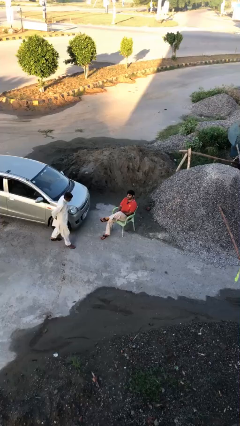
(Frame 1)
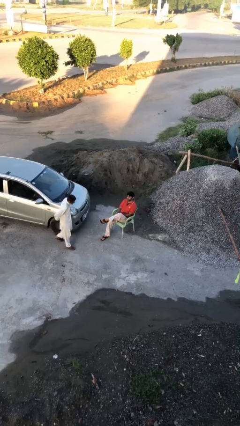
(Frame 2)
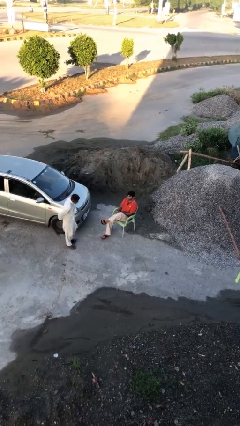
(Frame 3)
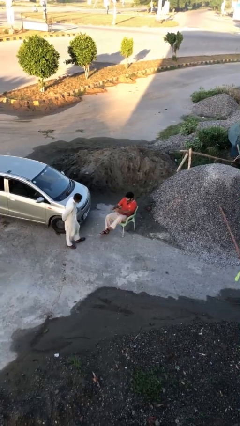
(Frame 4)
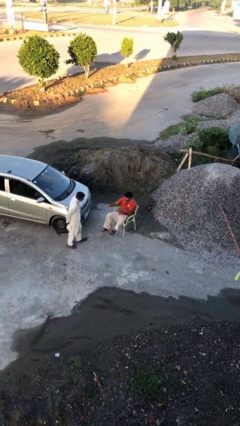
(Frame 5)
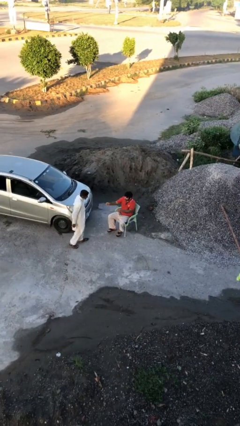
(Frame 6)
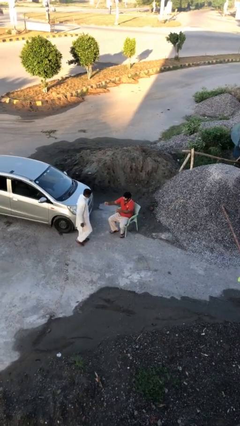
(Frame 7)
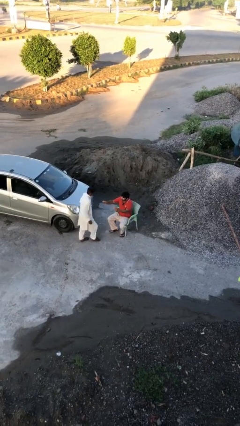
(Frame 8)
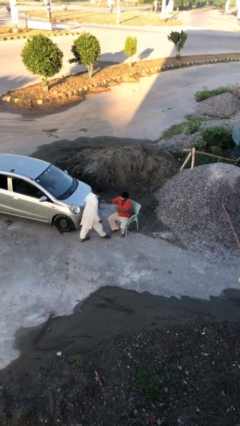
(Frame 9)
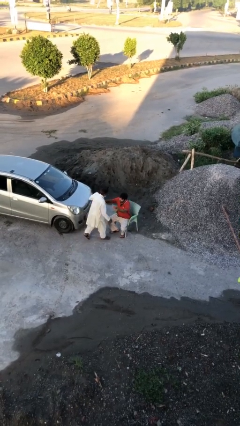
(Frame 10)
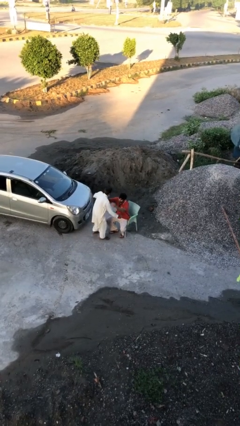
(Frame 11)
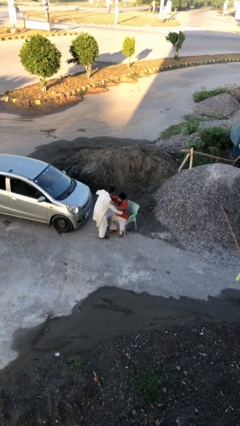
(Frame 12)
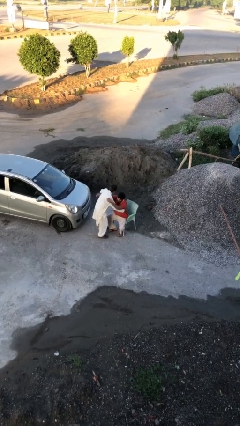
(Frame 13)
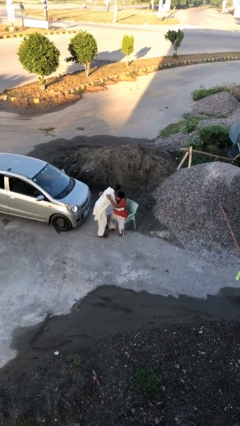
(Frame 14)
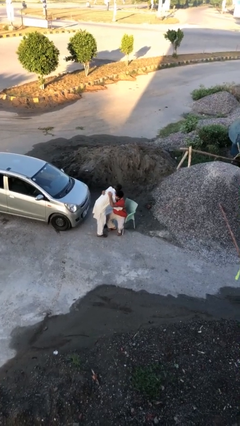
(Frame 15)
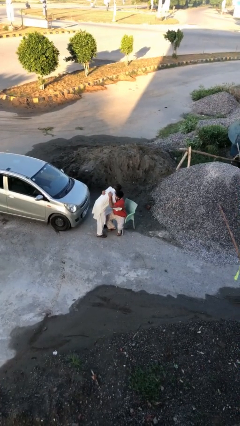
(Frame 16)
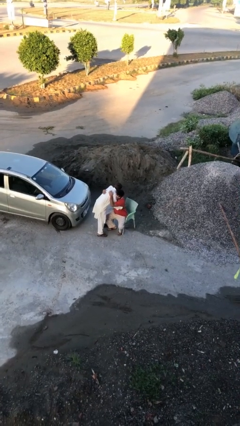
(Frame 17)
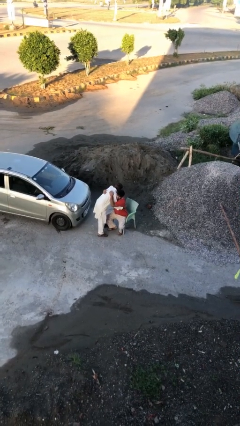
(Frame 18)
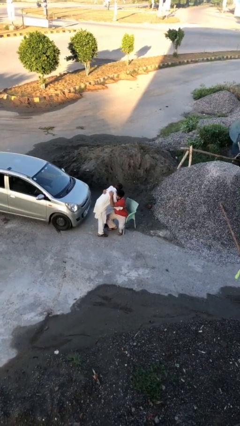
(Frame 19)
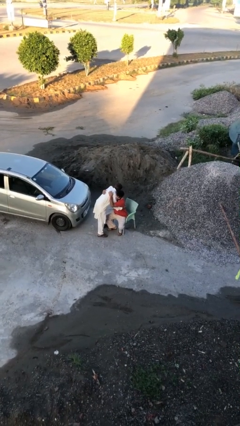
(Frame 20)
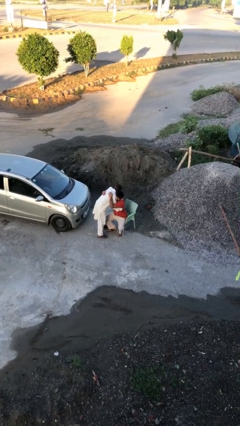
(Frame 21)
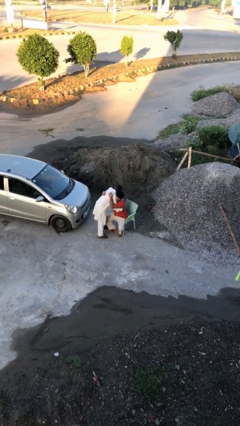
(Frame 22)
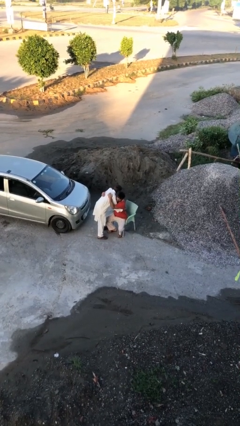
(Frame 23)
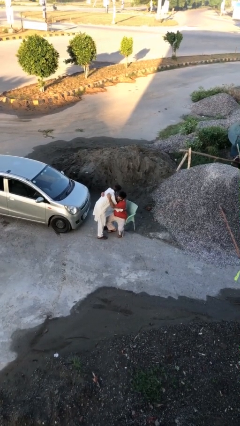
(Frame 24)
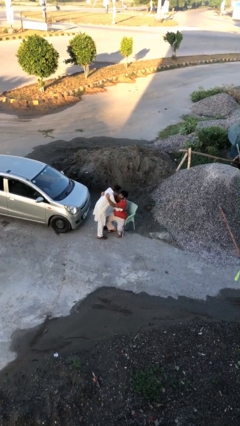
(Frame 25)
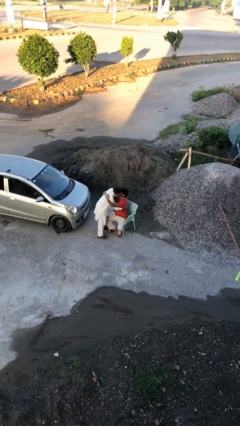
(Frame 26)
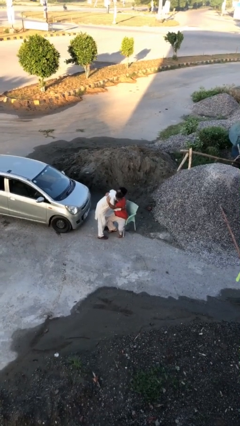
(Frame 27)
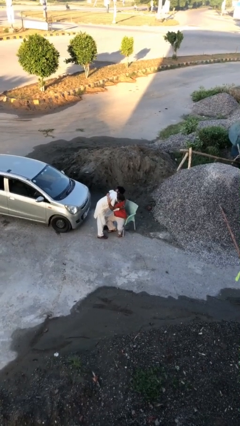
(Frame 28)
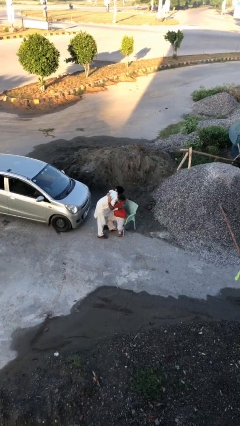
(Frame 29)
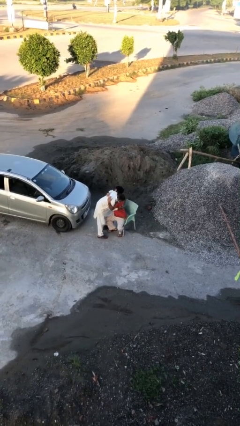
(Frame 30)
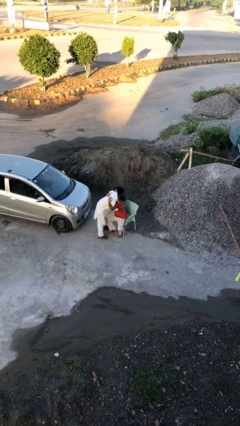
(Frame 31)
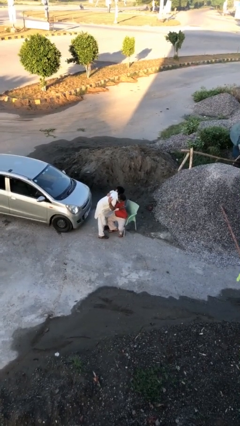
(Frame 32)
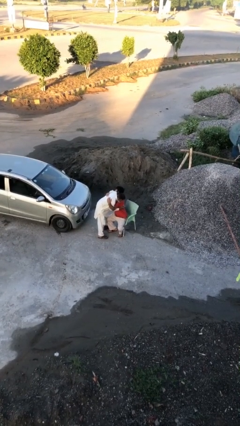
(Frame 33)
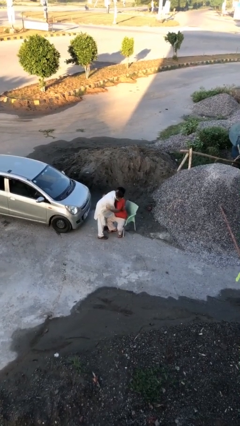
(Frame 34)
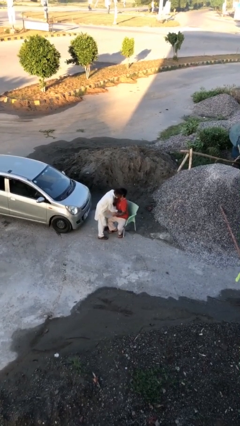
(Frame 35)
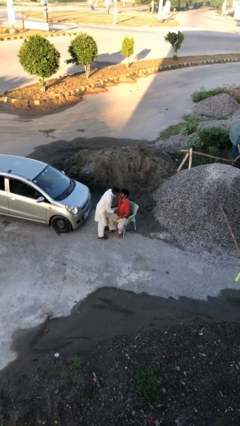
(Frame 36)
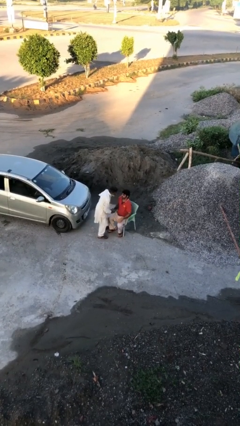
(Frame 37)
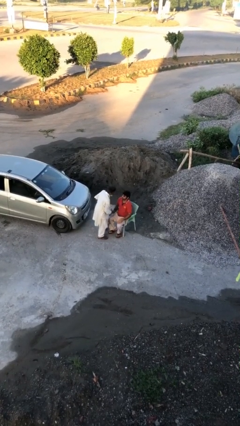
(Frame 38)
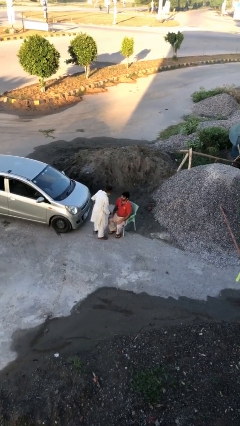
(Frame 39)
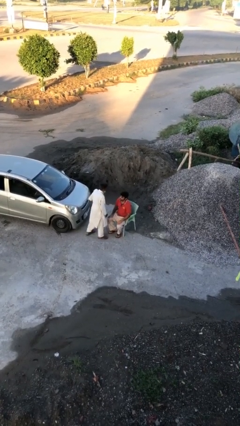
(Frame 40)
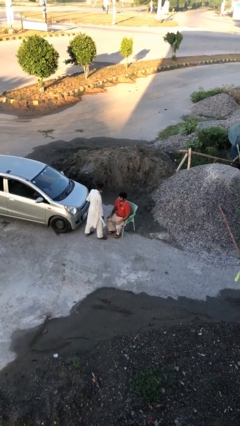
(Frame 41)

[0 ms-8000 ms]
person embraces person

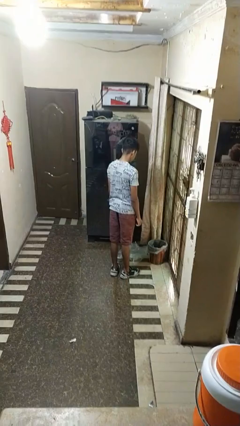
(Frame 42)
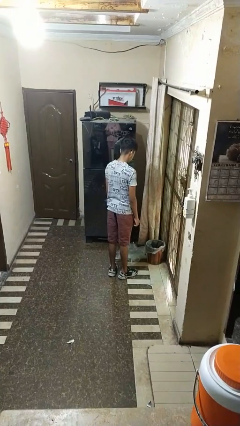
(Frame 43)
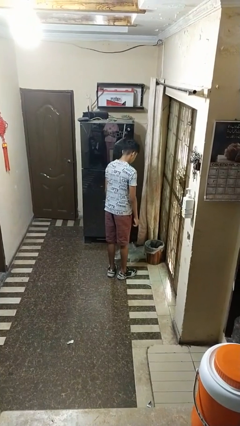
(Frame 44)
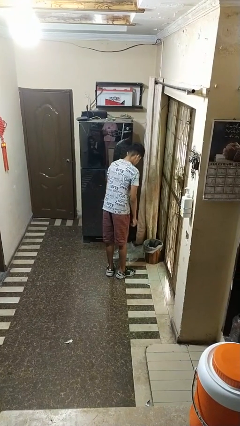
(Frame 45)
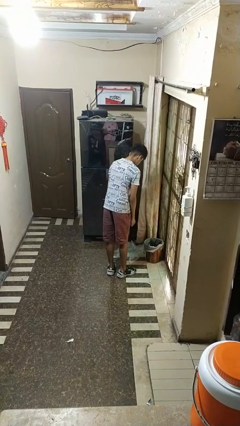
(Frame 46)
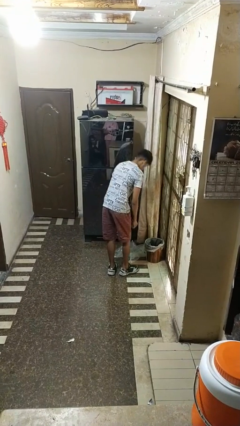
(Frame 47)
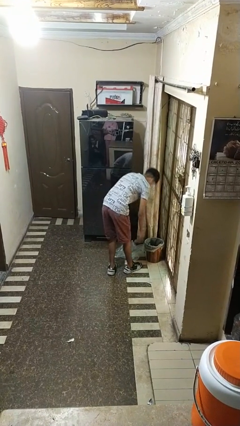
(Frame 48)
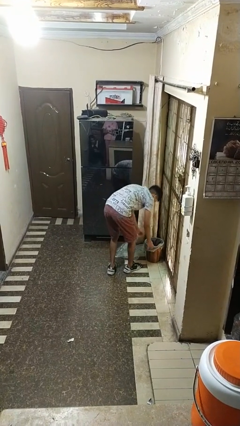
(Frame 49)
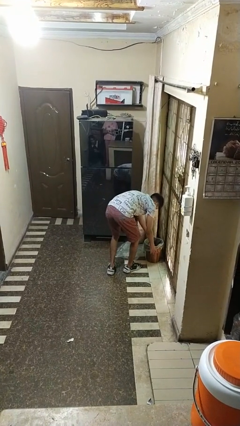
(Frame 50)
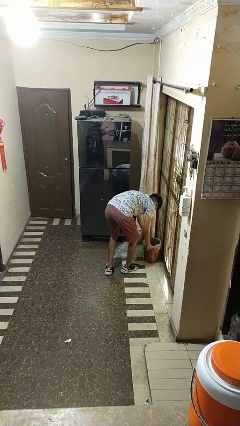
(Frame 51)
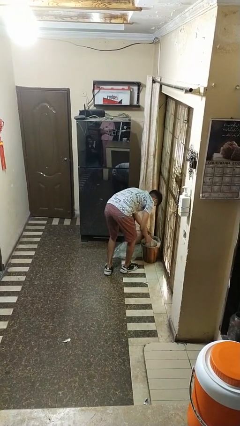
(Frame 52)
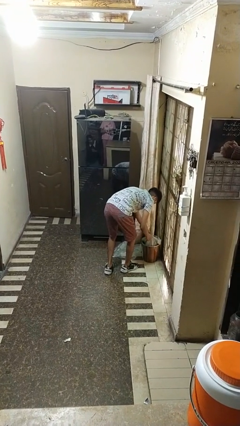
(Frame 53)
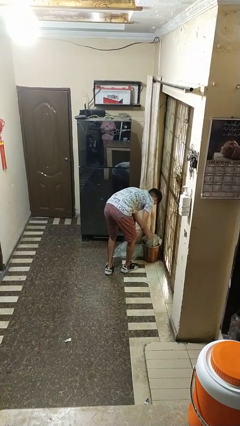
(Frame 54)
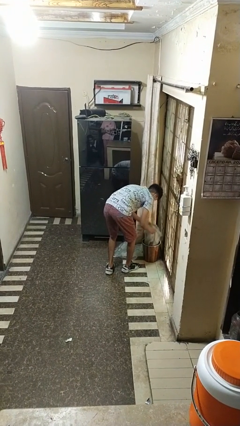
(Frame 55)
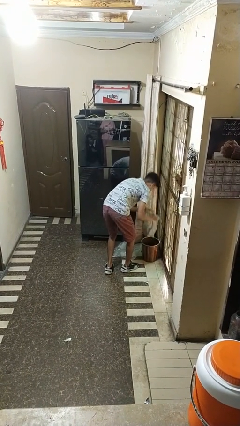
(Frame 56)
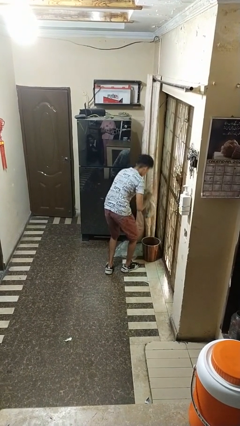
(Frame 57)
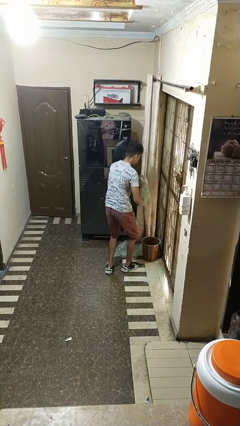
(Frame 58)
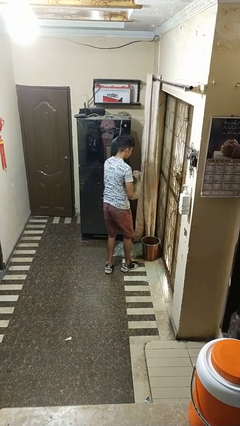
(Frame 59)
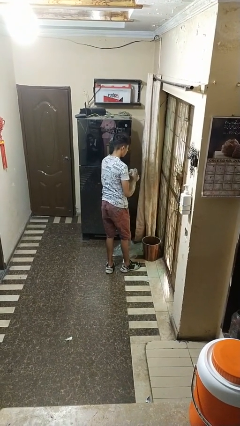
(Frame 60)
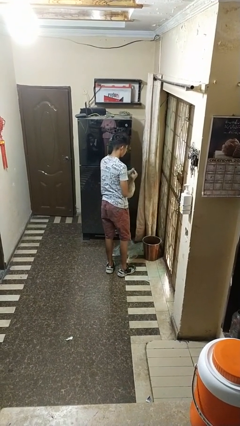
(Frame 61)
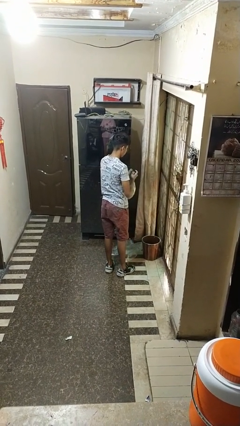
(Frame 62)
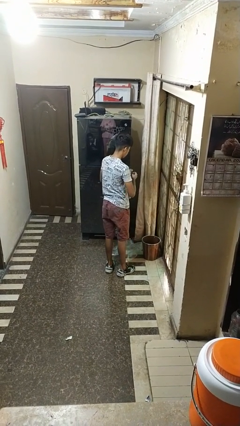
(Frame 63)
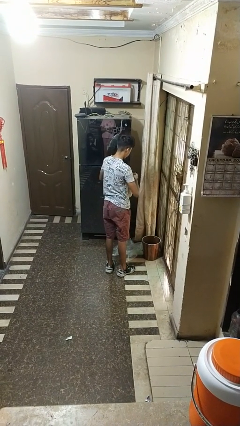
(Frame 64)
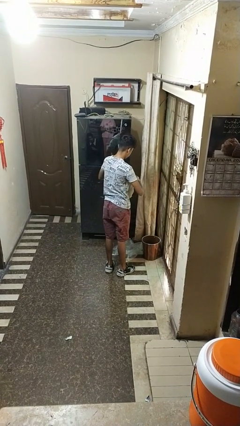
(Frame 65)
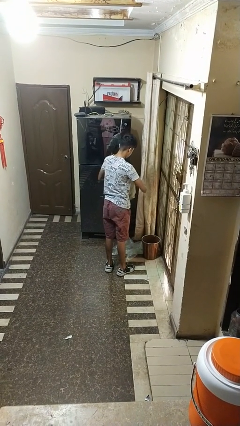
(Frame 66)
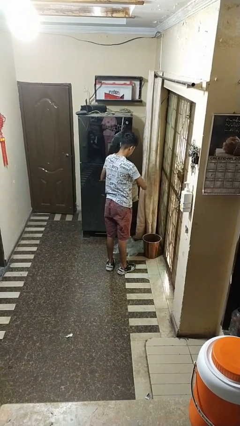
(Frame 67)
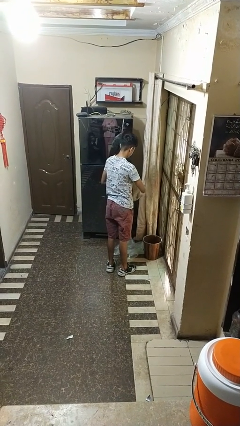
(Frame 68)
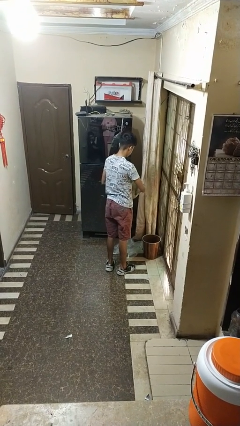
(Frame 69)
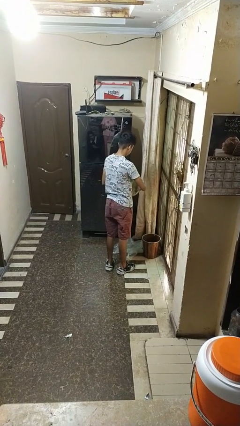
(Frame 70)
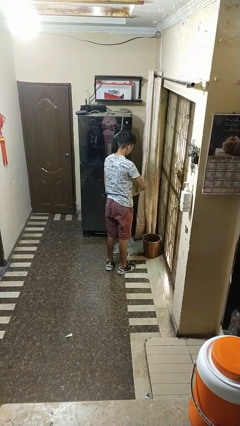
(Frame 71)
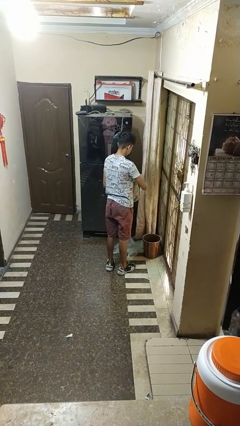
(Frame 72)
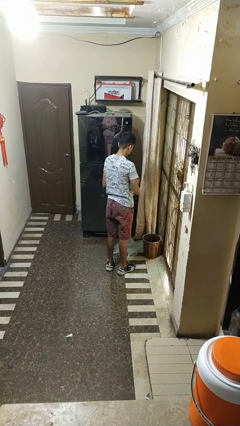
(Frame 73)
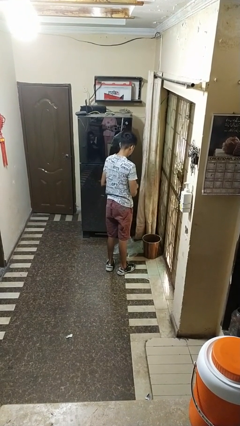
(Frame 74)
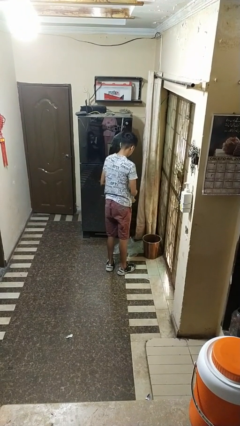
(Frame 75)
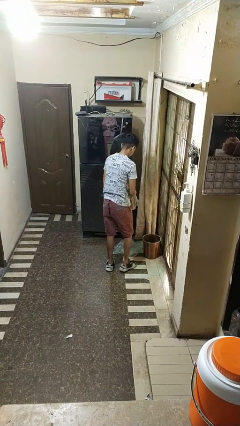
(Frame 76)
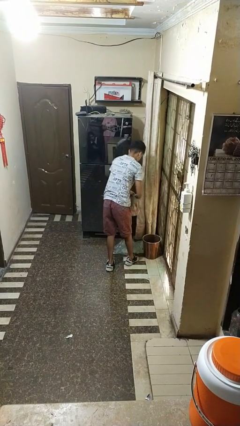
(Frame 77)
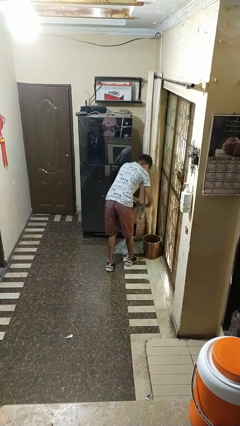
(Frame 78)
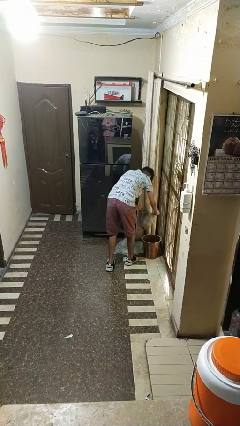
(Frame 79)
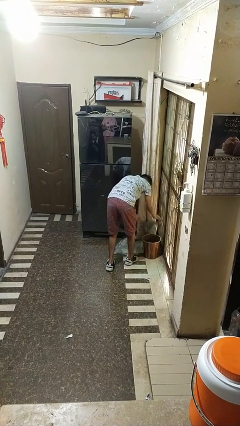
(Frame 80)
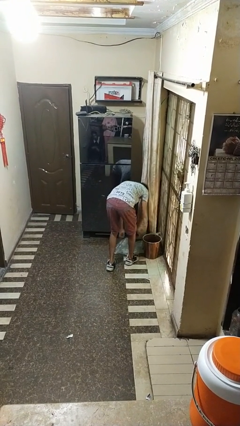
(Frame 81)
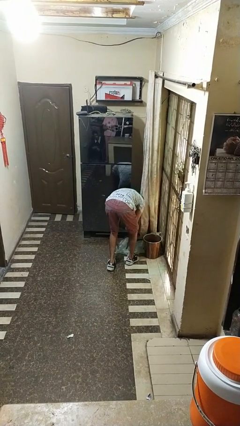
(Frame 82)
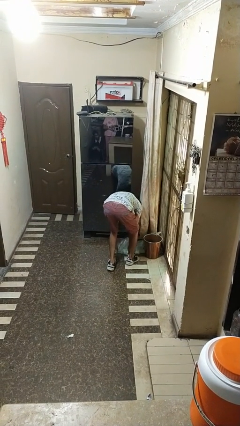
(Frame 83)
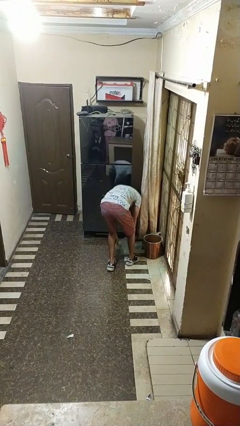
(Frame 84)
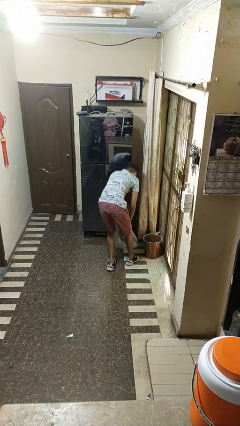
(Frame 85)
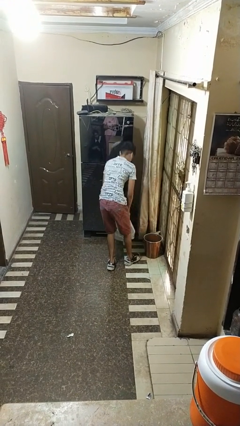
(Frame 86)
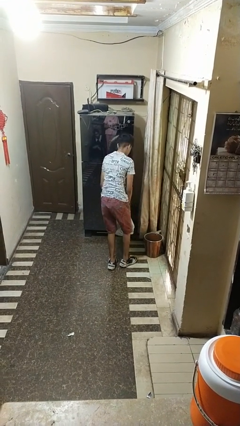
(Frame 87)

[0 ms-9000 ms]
person removes trashbag from trashcan

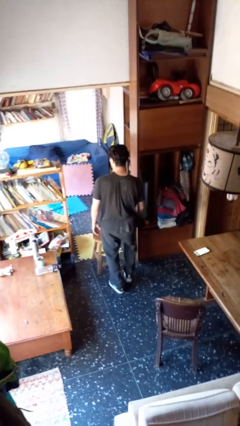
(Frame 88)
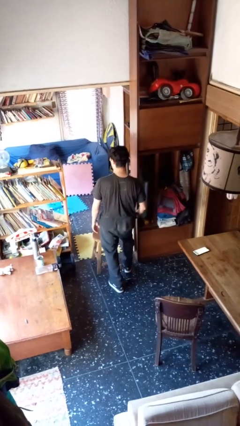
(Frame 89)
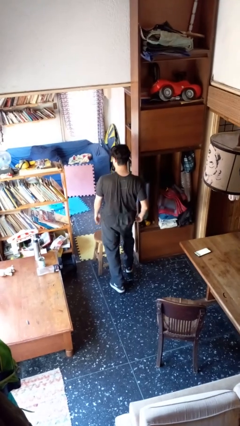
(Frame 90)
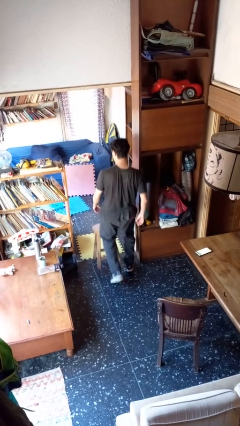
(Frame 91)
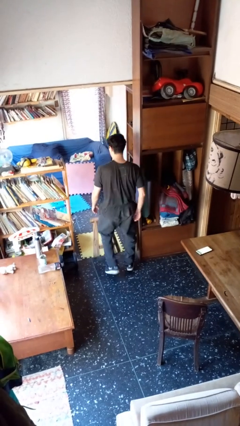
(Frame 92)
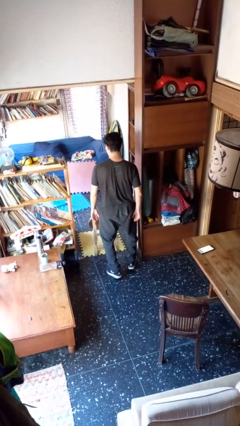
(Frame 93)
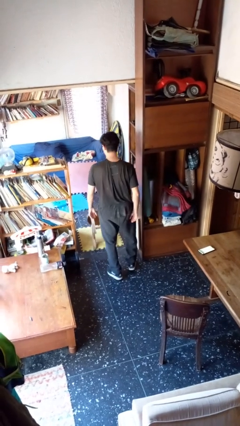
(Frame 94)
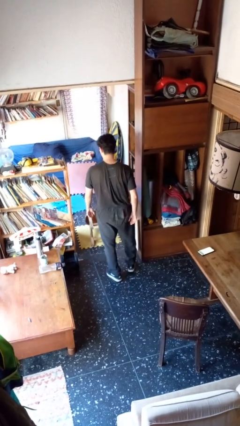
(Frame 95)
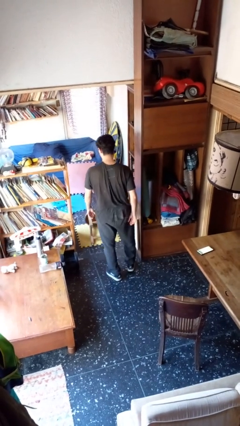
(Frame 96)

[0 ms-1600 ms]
person knocks over furniture
